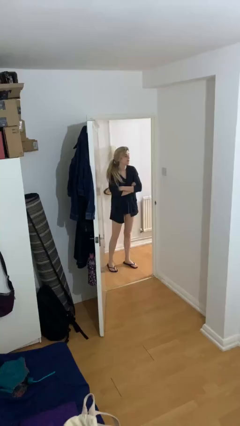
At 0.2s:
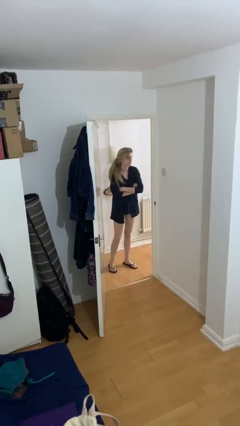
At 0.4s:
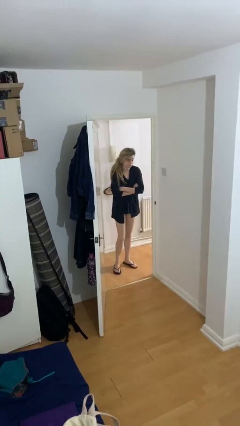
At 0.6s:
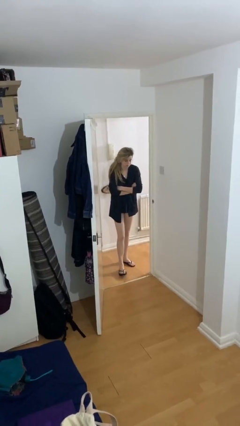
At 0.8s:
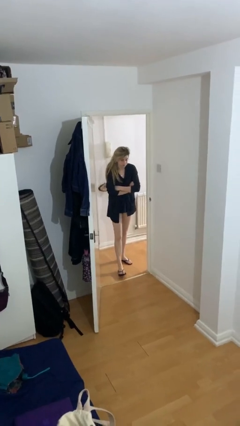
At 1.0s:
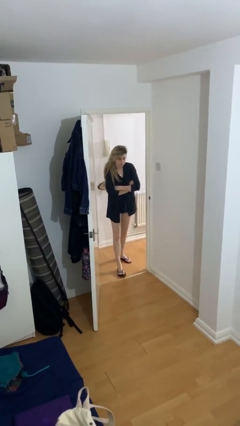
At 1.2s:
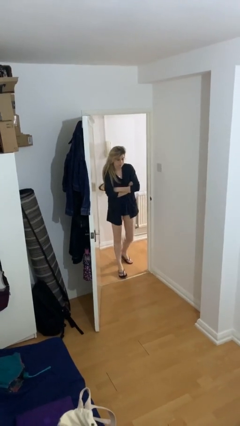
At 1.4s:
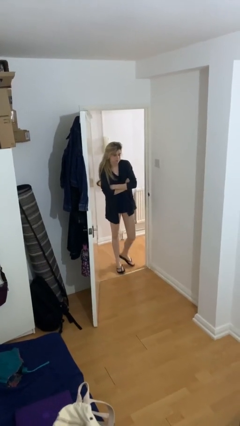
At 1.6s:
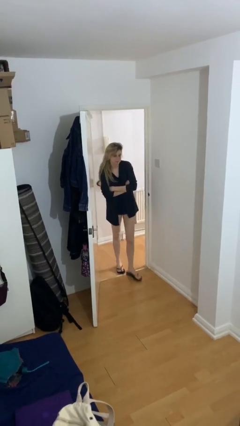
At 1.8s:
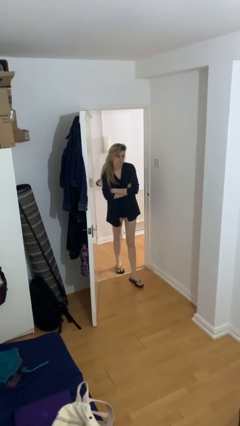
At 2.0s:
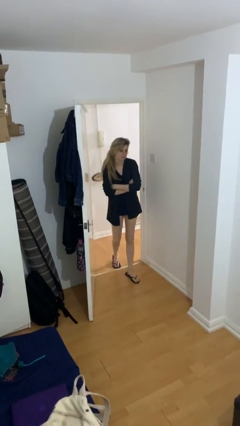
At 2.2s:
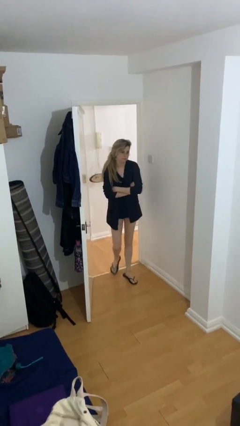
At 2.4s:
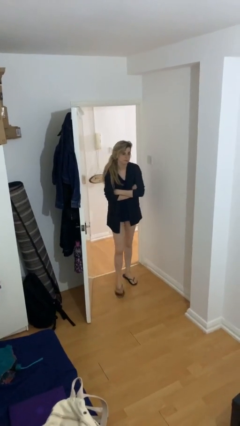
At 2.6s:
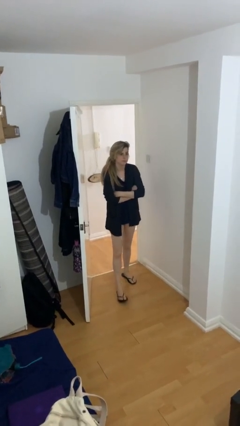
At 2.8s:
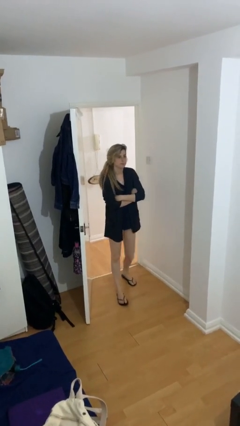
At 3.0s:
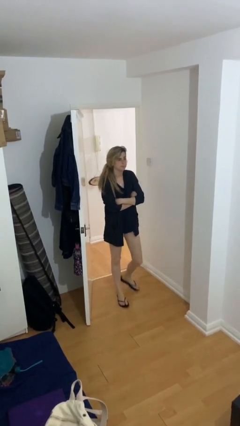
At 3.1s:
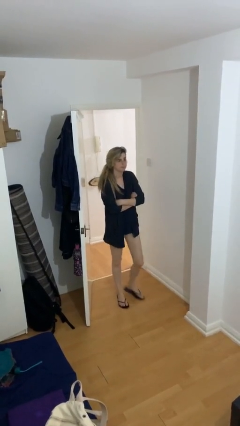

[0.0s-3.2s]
person enters scene through structure

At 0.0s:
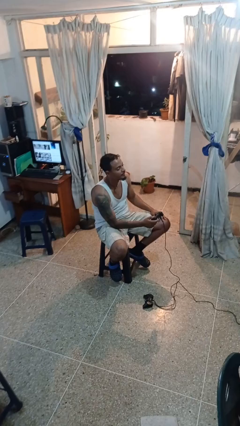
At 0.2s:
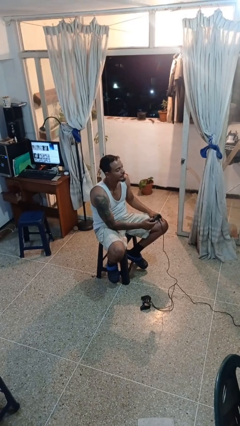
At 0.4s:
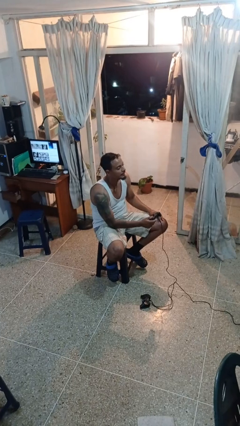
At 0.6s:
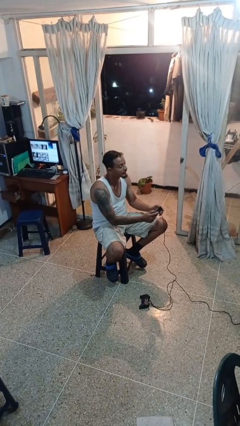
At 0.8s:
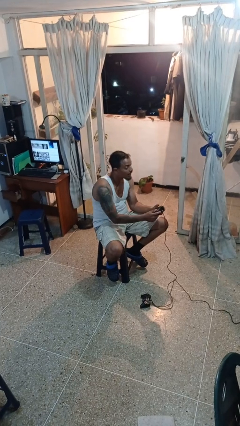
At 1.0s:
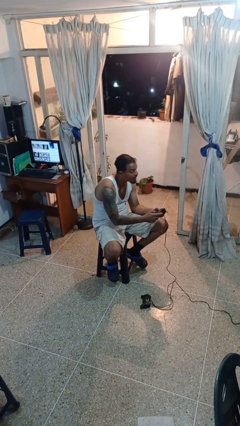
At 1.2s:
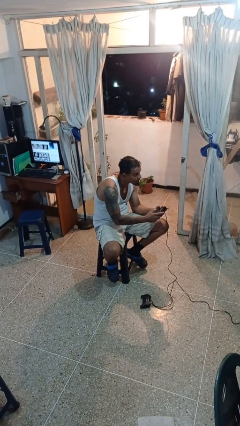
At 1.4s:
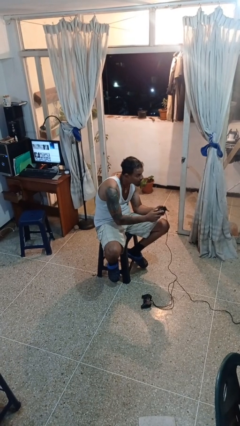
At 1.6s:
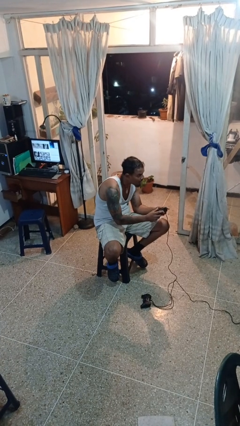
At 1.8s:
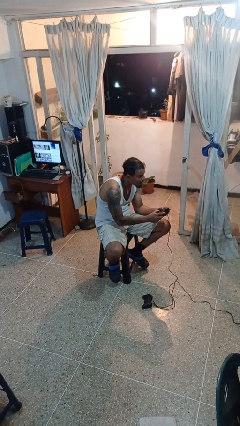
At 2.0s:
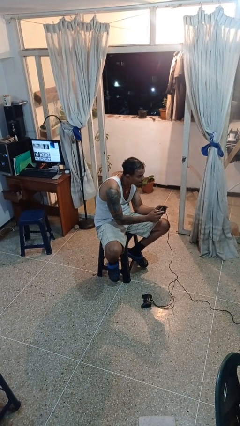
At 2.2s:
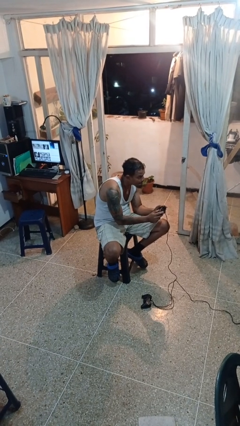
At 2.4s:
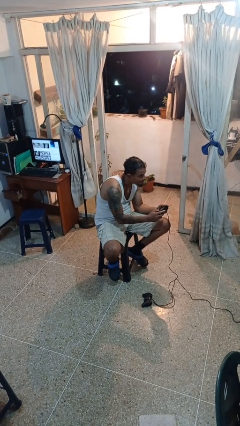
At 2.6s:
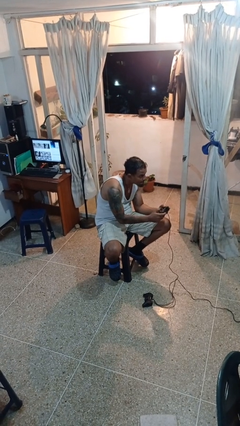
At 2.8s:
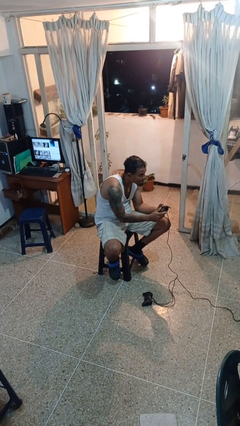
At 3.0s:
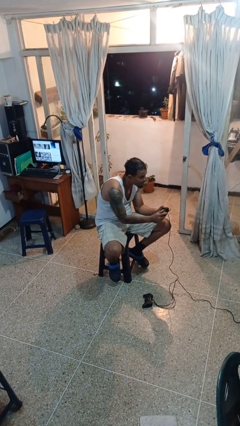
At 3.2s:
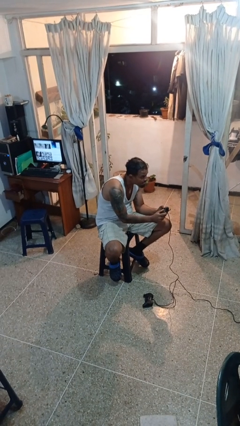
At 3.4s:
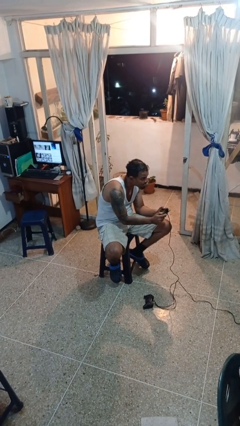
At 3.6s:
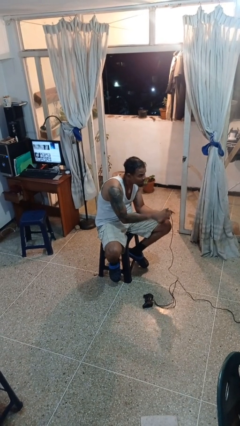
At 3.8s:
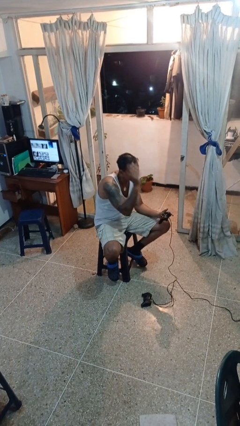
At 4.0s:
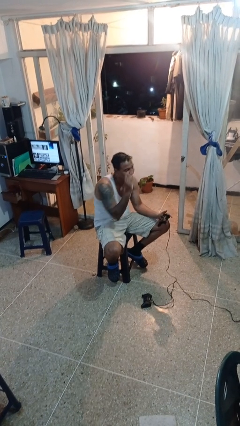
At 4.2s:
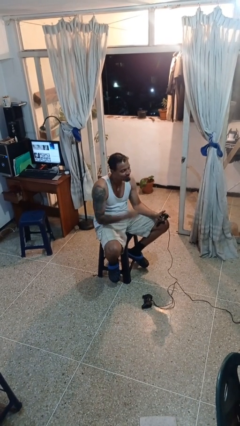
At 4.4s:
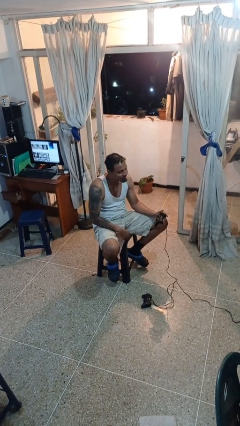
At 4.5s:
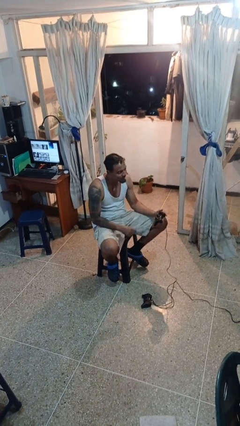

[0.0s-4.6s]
person interacts with handheld game

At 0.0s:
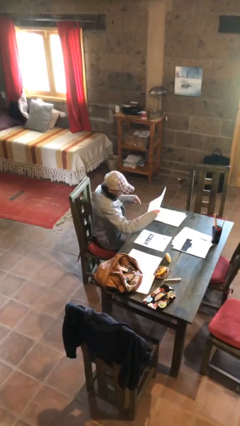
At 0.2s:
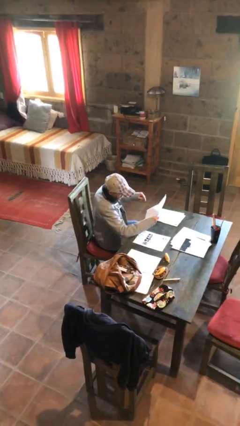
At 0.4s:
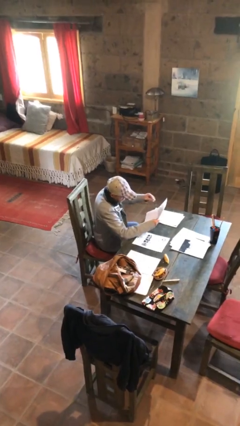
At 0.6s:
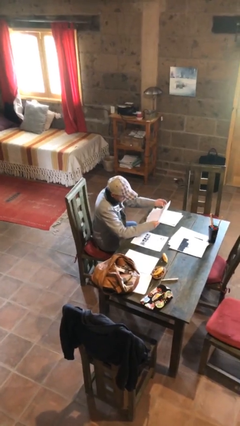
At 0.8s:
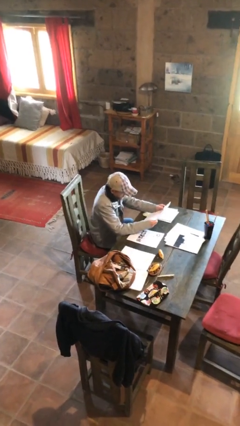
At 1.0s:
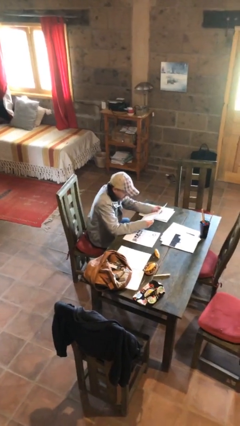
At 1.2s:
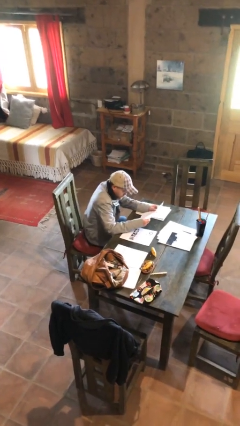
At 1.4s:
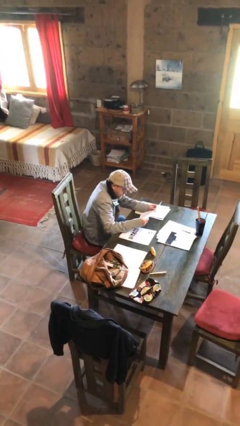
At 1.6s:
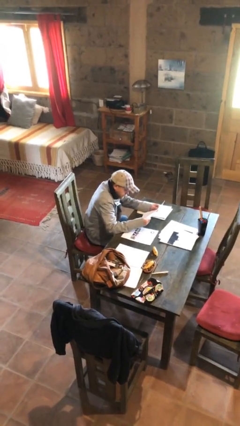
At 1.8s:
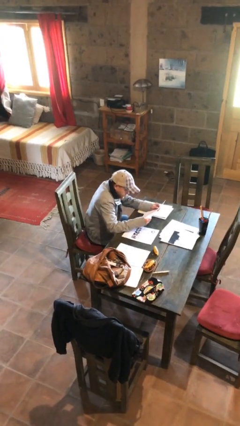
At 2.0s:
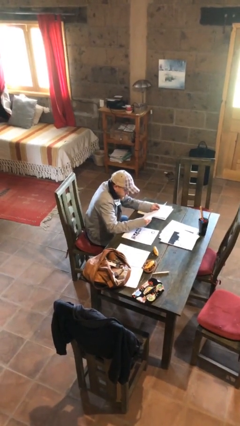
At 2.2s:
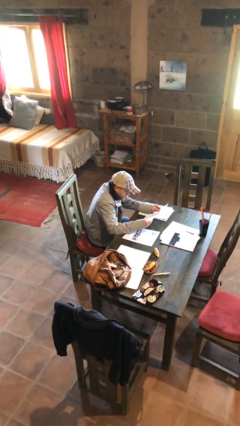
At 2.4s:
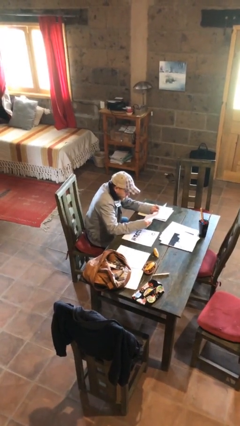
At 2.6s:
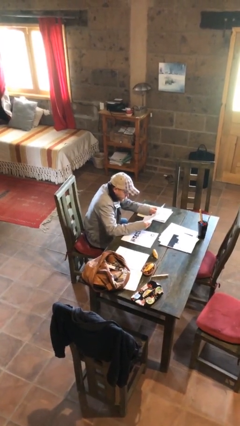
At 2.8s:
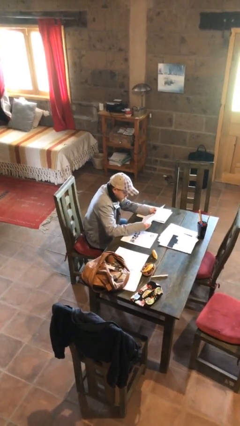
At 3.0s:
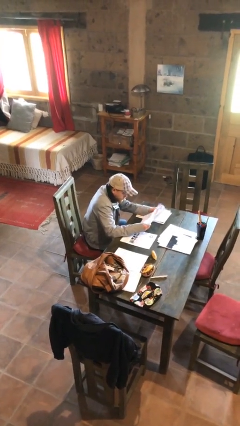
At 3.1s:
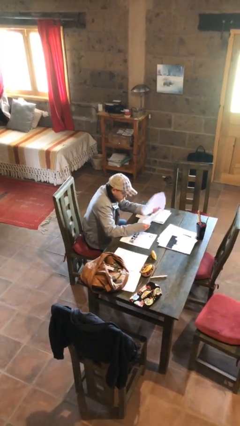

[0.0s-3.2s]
person reads document

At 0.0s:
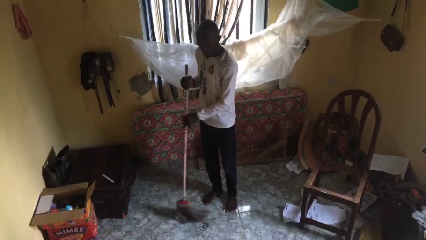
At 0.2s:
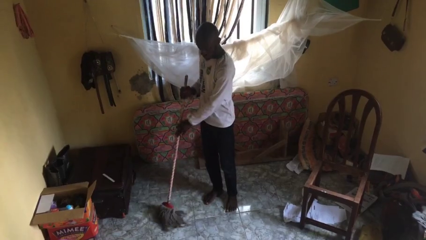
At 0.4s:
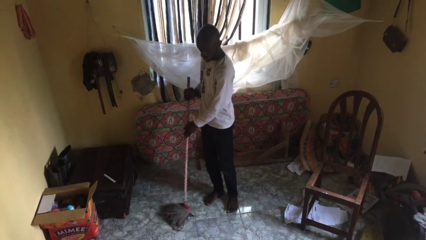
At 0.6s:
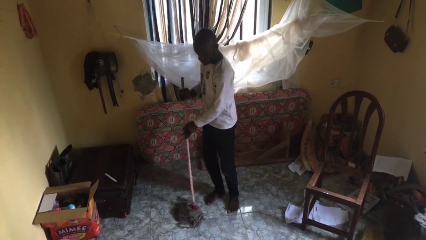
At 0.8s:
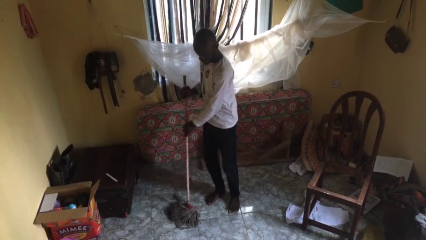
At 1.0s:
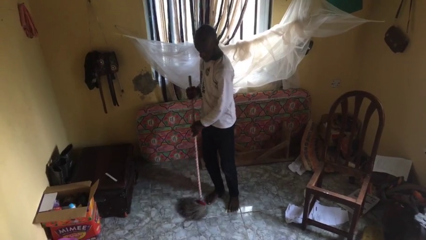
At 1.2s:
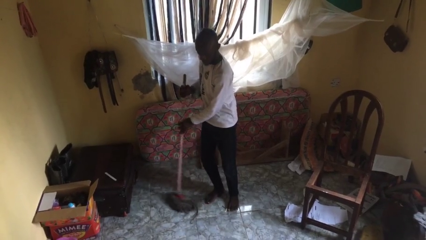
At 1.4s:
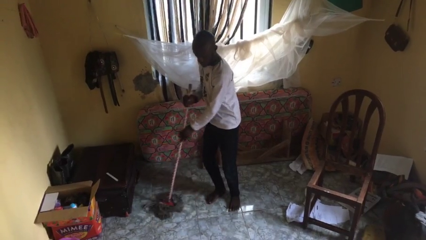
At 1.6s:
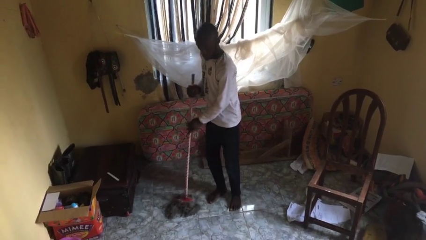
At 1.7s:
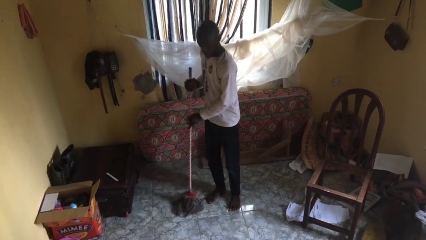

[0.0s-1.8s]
person mops

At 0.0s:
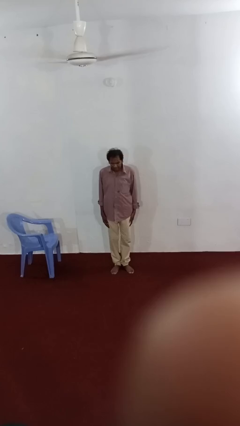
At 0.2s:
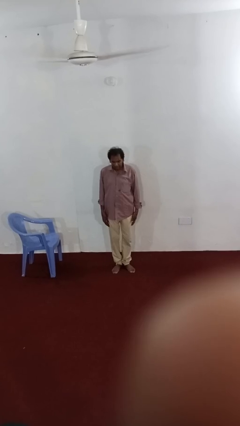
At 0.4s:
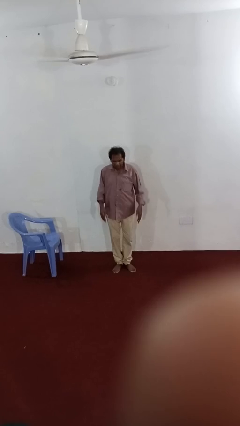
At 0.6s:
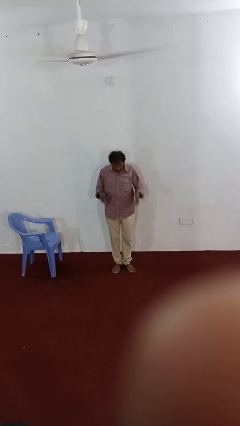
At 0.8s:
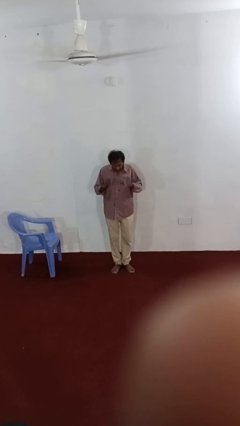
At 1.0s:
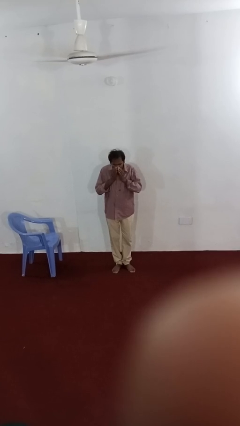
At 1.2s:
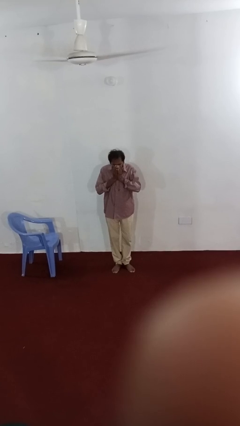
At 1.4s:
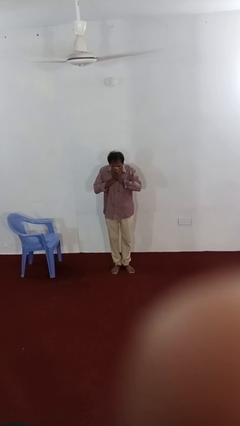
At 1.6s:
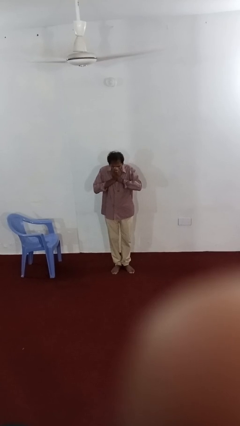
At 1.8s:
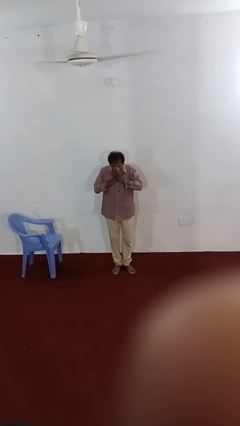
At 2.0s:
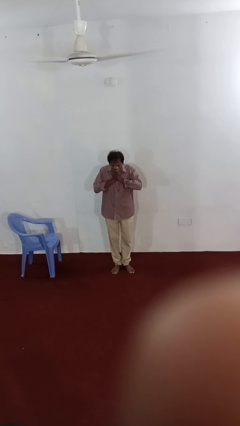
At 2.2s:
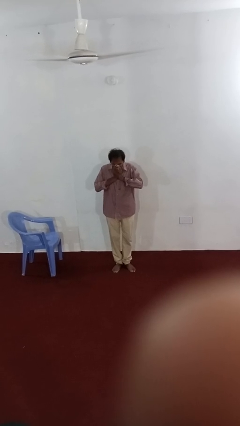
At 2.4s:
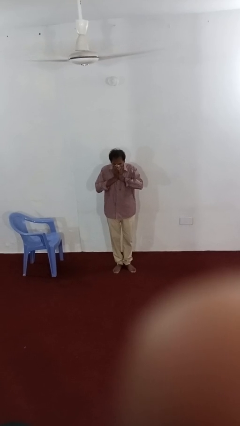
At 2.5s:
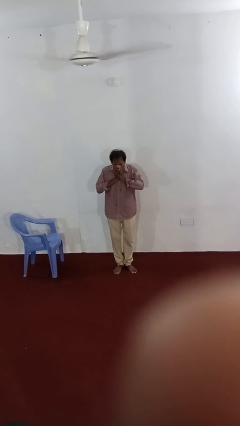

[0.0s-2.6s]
person sneezes into hand

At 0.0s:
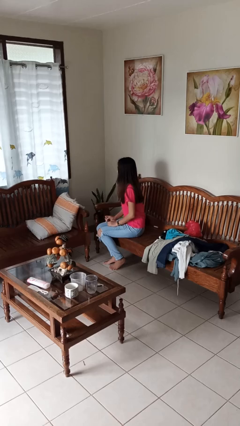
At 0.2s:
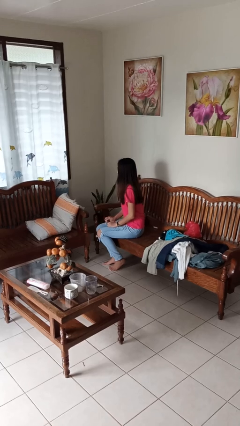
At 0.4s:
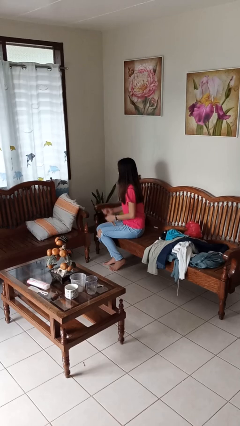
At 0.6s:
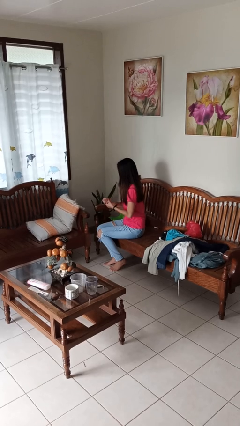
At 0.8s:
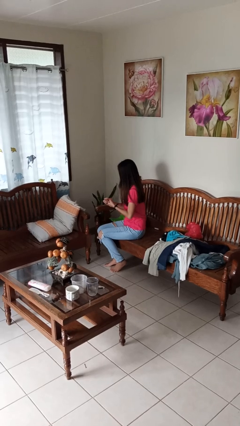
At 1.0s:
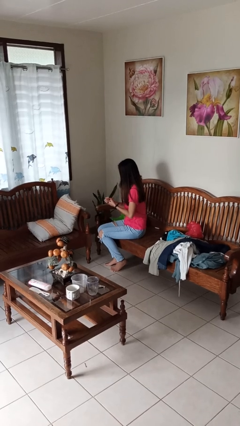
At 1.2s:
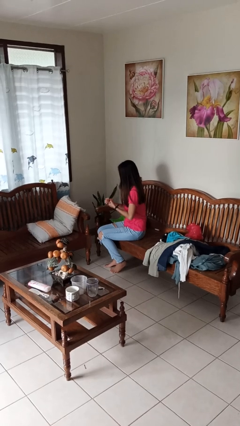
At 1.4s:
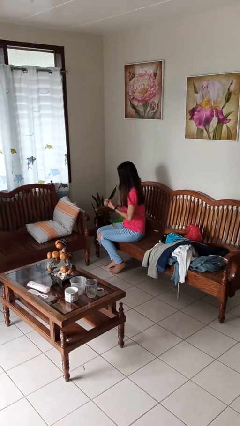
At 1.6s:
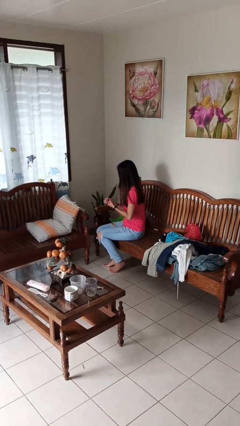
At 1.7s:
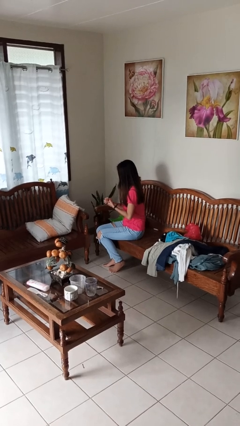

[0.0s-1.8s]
person files fingernails

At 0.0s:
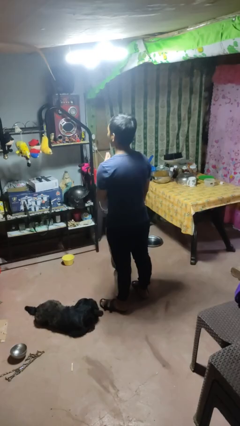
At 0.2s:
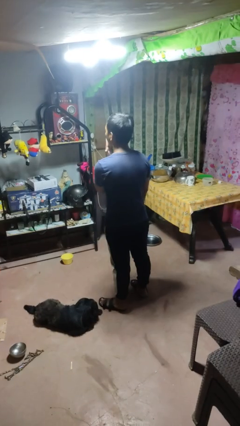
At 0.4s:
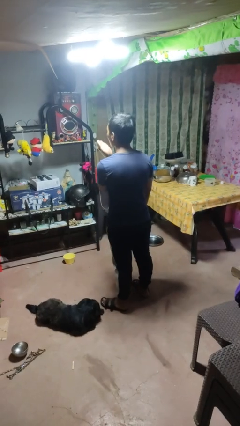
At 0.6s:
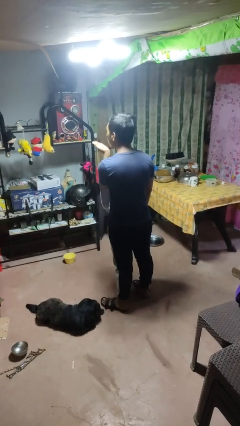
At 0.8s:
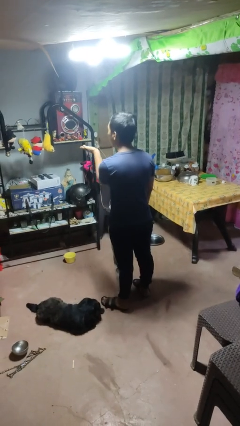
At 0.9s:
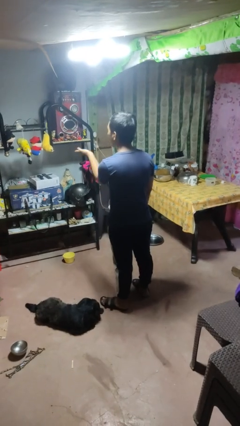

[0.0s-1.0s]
person gestures blow kiss
